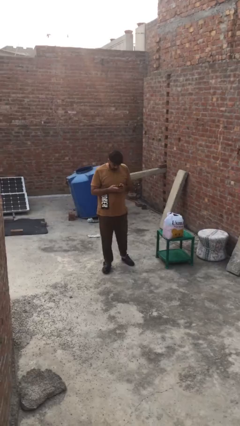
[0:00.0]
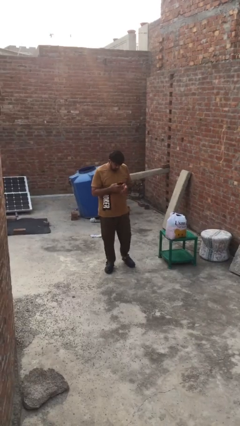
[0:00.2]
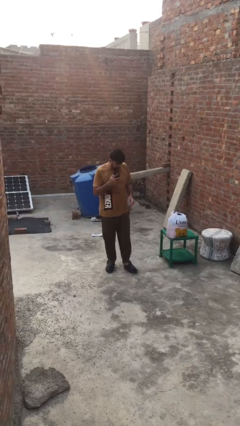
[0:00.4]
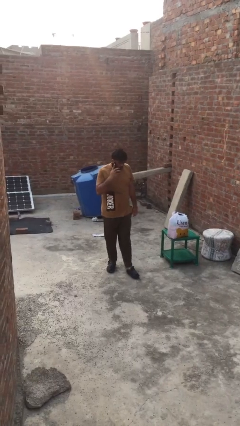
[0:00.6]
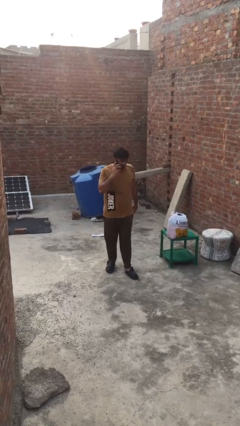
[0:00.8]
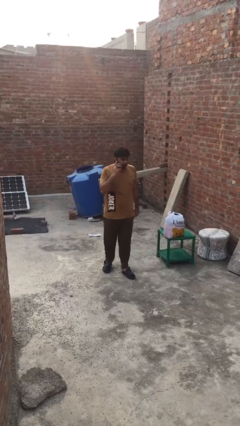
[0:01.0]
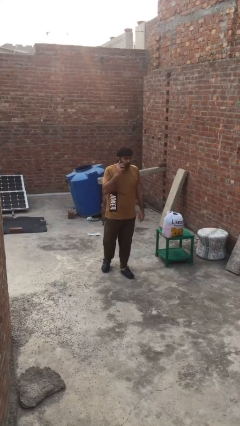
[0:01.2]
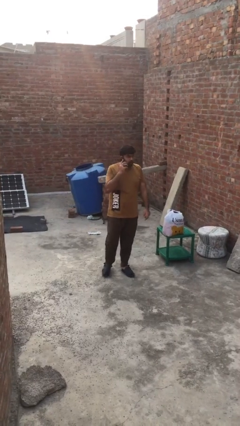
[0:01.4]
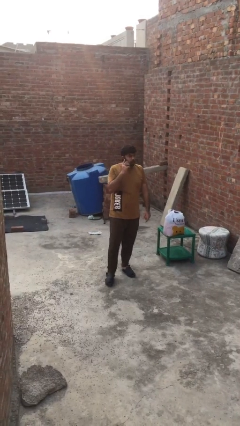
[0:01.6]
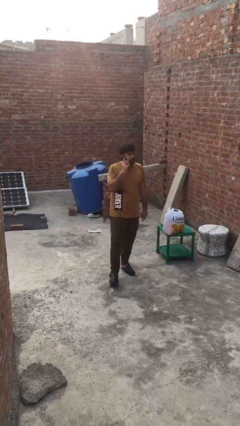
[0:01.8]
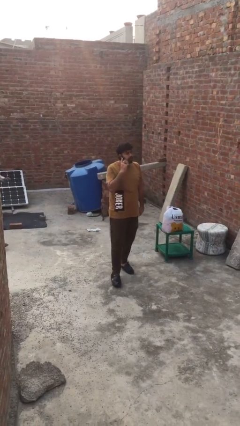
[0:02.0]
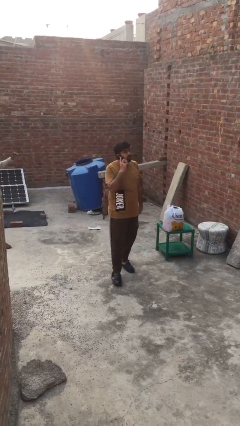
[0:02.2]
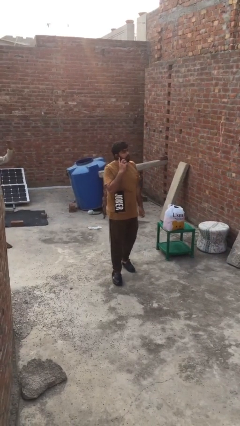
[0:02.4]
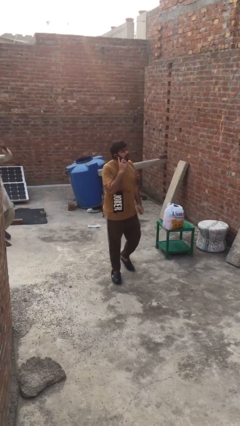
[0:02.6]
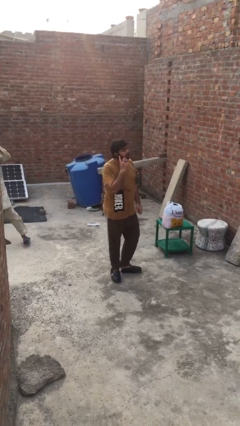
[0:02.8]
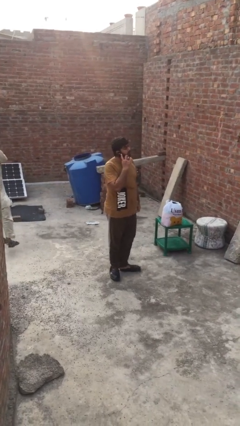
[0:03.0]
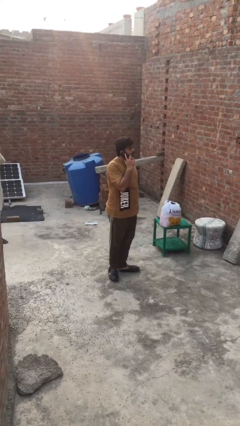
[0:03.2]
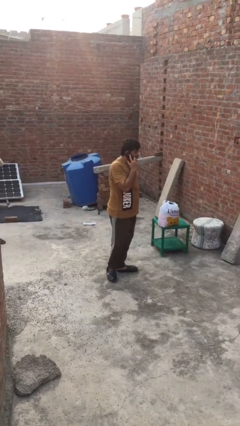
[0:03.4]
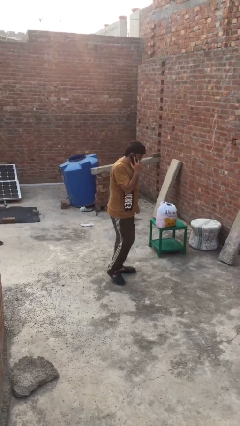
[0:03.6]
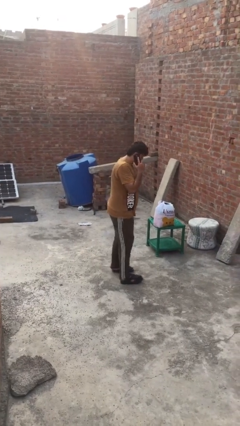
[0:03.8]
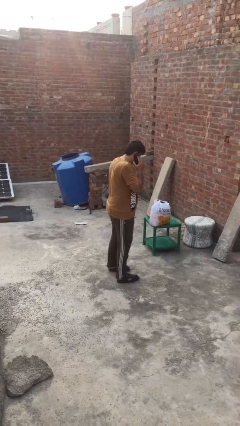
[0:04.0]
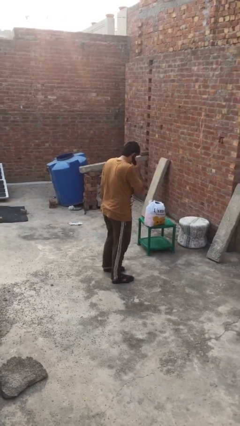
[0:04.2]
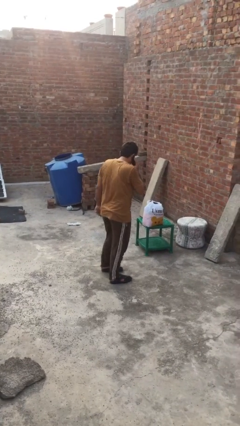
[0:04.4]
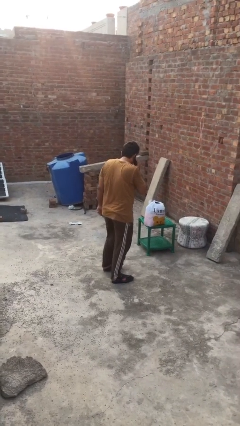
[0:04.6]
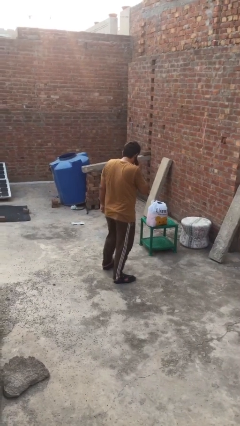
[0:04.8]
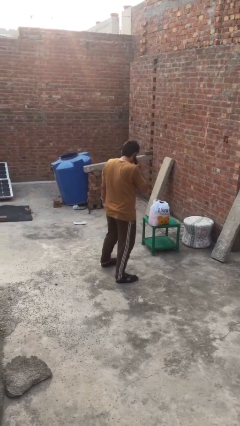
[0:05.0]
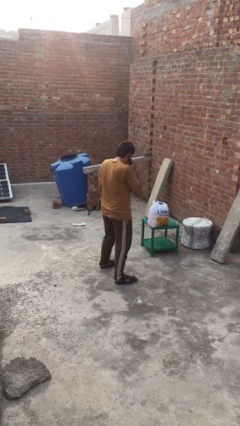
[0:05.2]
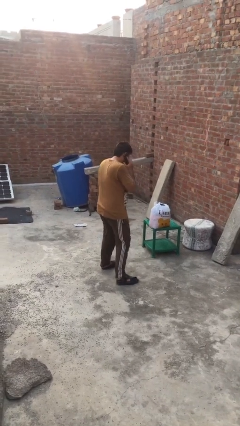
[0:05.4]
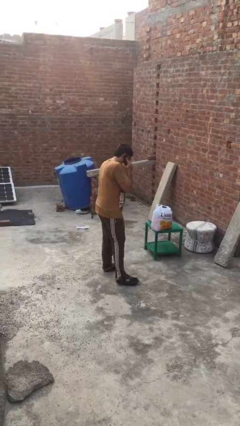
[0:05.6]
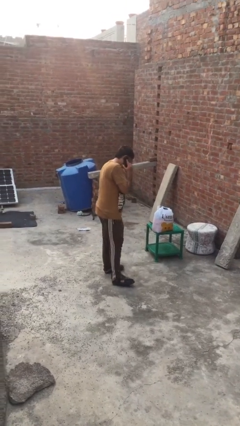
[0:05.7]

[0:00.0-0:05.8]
person talks on phone

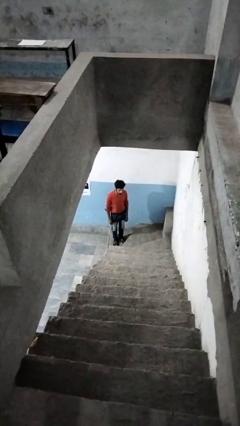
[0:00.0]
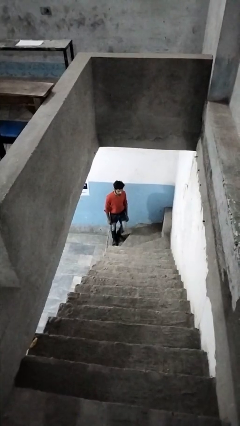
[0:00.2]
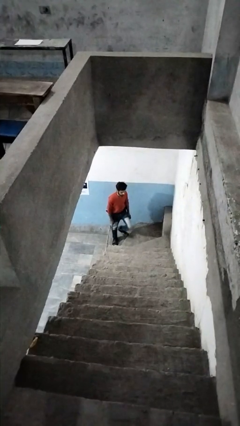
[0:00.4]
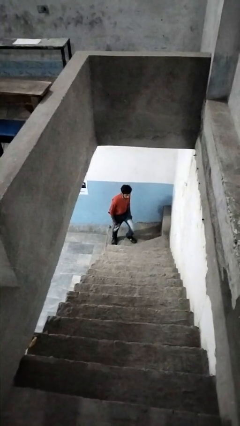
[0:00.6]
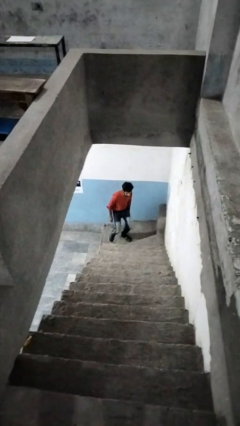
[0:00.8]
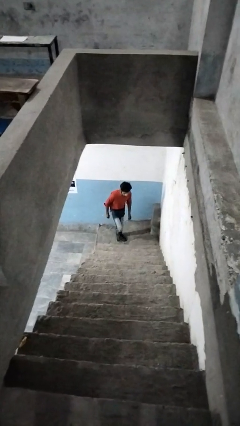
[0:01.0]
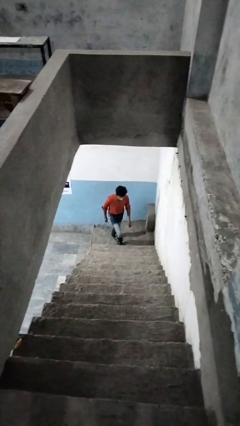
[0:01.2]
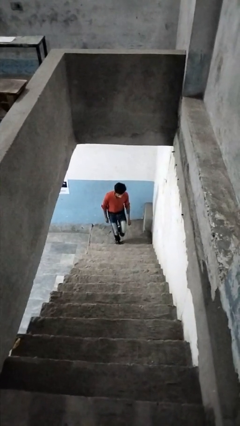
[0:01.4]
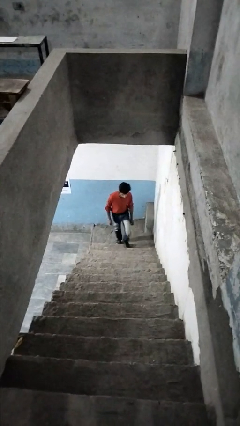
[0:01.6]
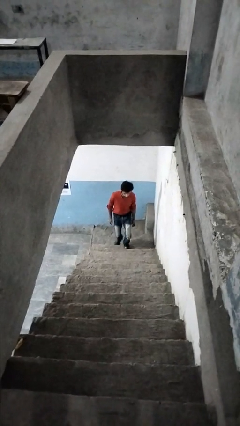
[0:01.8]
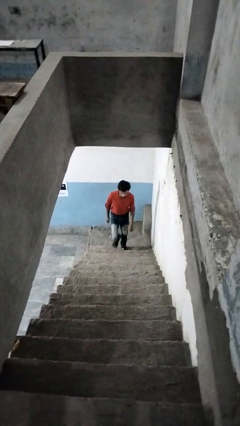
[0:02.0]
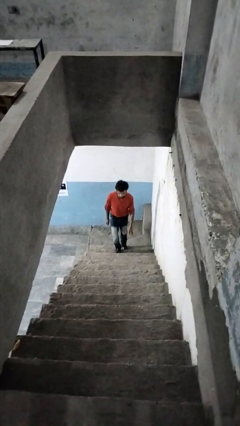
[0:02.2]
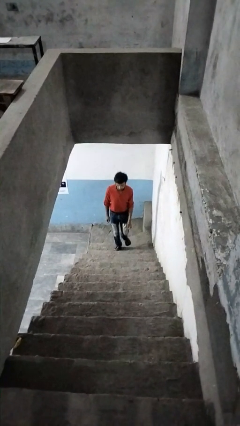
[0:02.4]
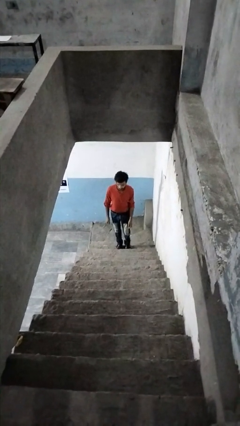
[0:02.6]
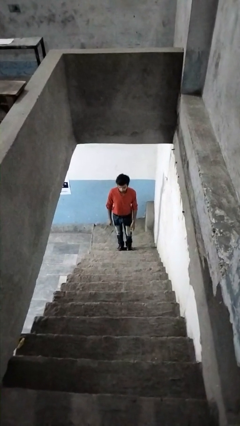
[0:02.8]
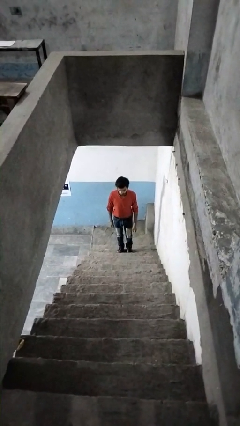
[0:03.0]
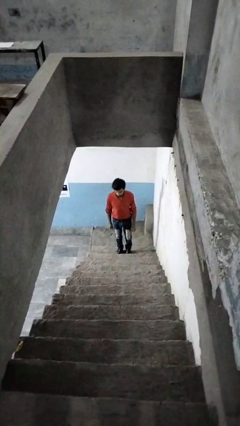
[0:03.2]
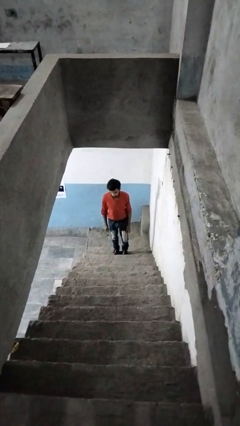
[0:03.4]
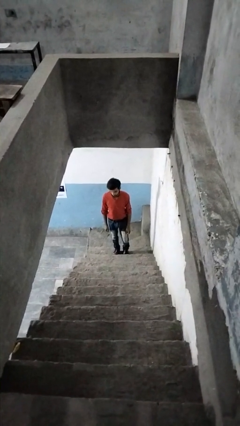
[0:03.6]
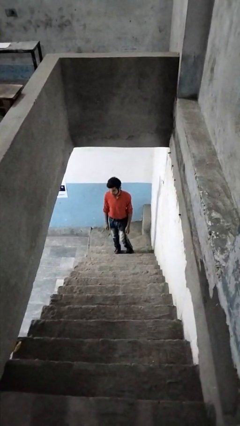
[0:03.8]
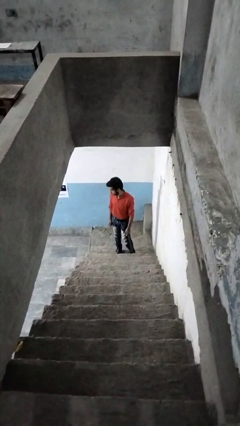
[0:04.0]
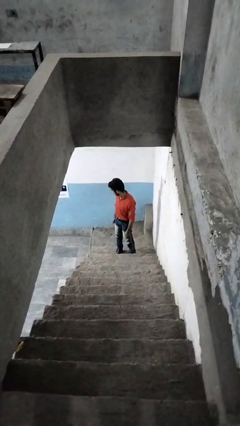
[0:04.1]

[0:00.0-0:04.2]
person climbs up stairs

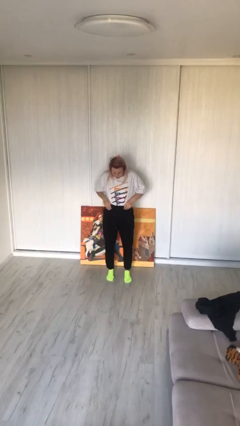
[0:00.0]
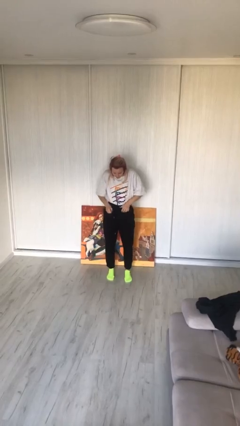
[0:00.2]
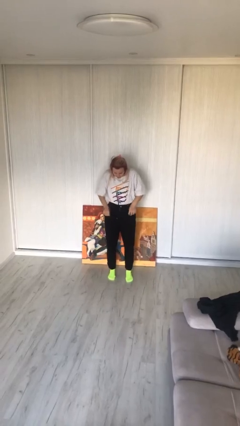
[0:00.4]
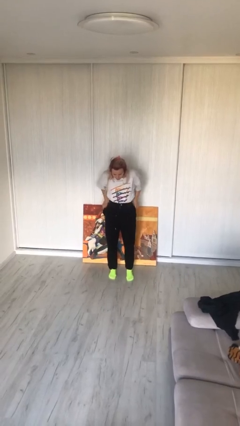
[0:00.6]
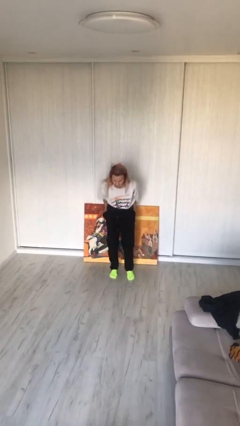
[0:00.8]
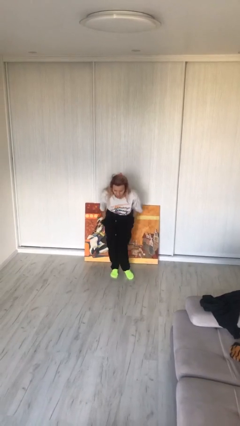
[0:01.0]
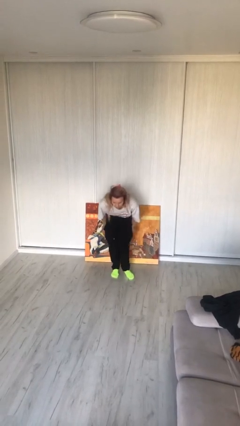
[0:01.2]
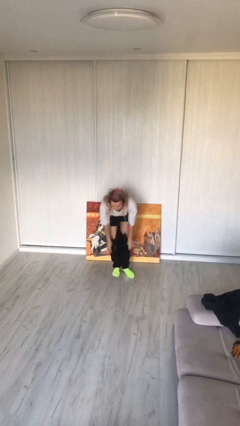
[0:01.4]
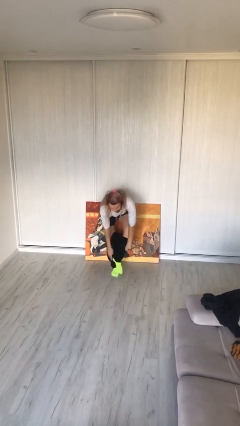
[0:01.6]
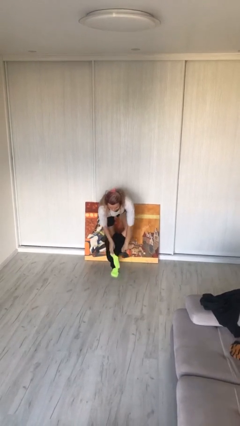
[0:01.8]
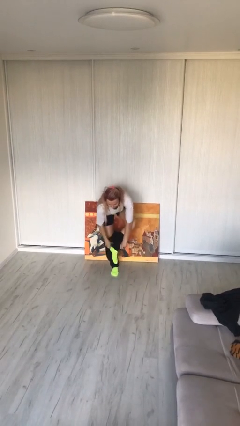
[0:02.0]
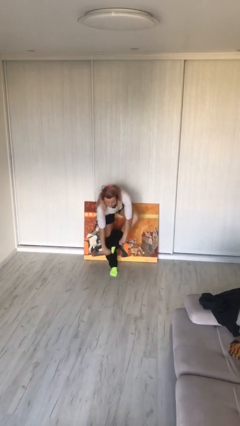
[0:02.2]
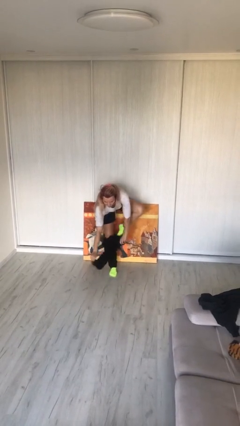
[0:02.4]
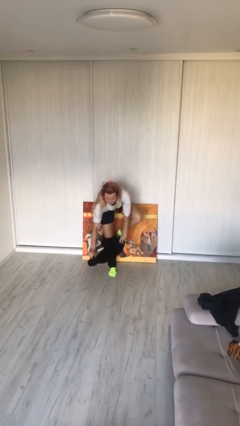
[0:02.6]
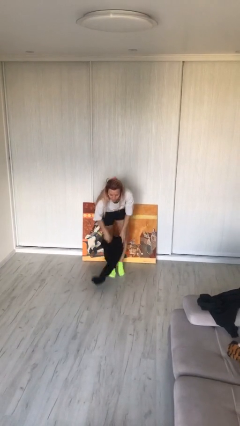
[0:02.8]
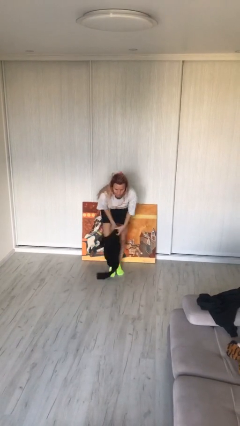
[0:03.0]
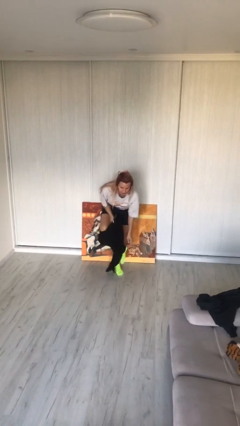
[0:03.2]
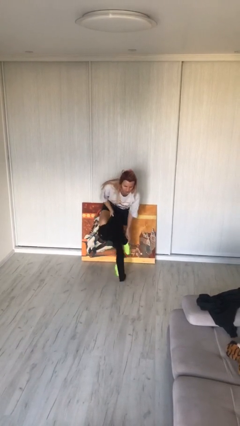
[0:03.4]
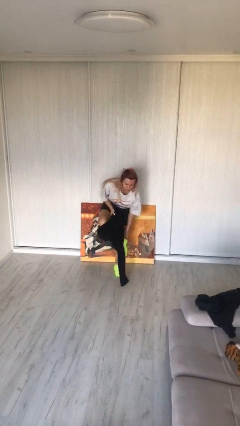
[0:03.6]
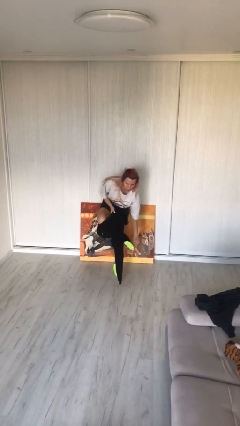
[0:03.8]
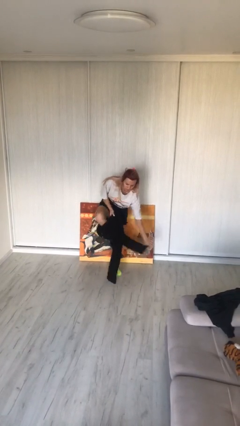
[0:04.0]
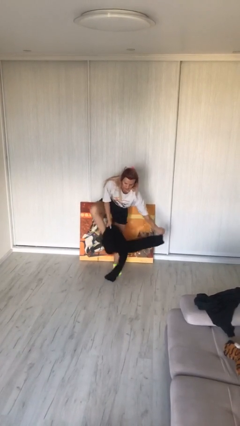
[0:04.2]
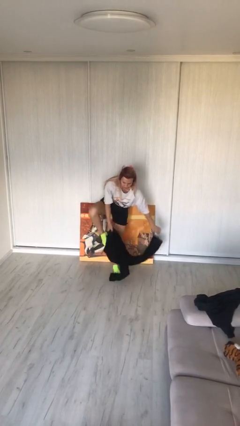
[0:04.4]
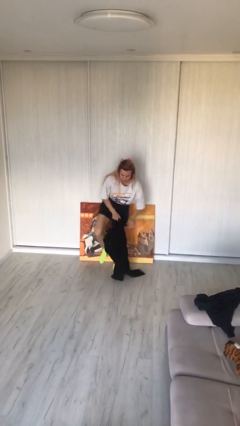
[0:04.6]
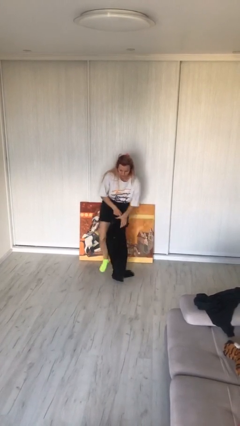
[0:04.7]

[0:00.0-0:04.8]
person takes off pants

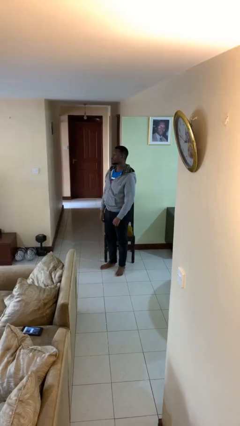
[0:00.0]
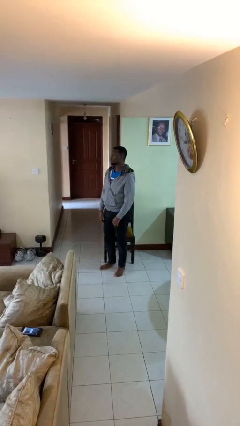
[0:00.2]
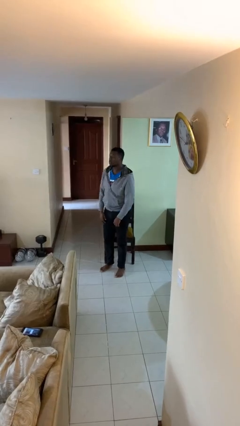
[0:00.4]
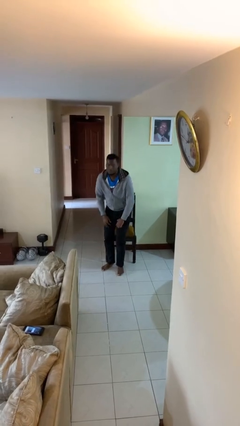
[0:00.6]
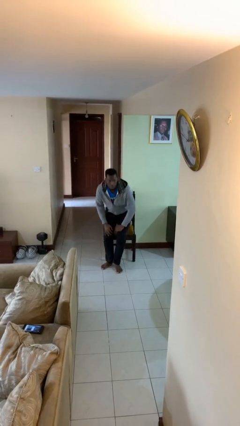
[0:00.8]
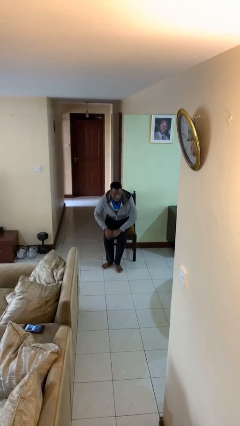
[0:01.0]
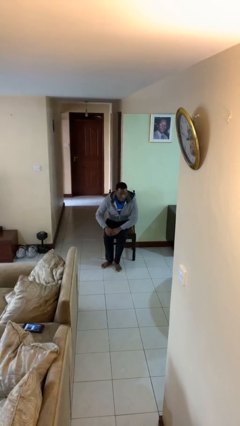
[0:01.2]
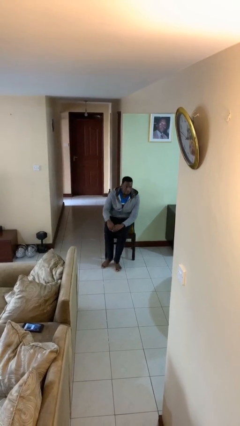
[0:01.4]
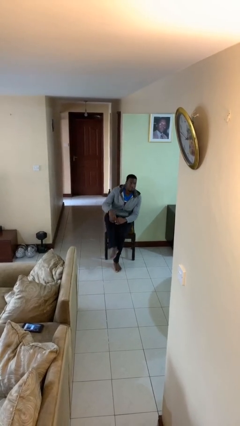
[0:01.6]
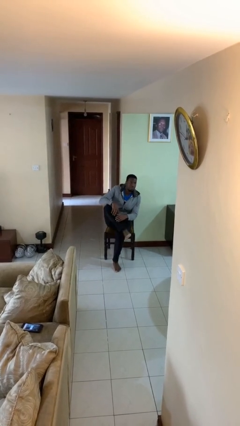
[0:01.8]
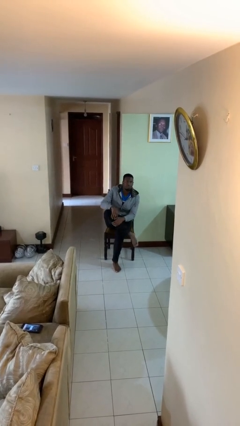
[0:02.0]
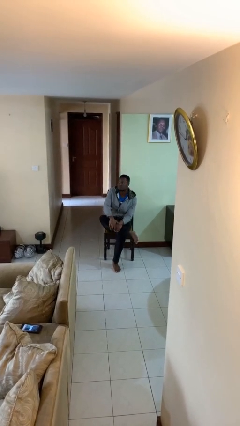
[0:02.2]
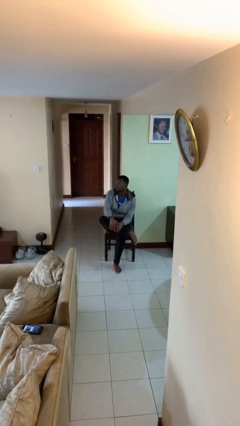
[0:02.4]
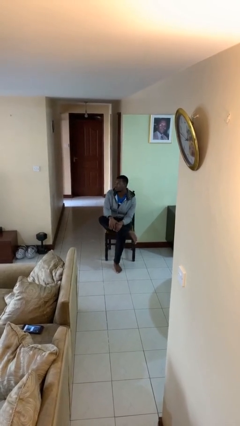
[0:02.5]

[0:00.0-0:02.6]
person sits down

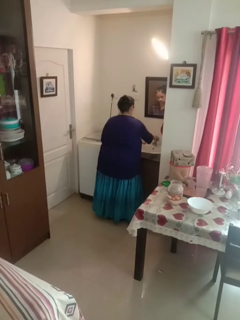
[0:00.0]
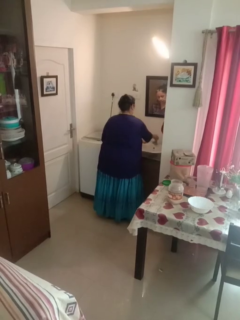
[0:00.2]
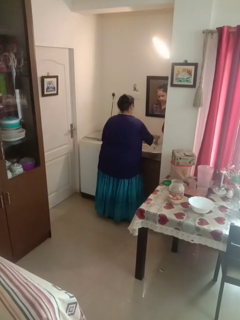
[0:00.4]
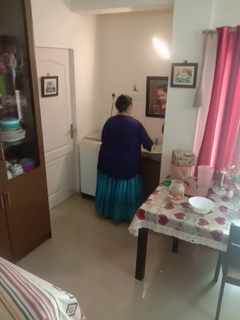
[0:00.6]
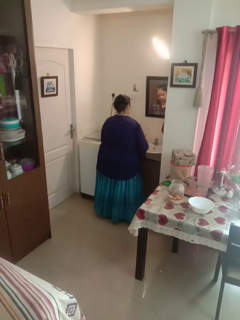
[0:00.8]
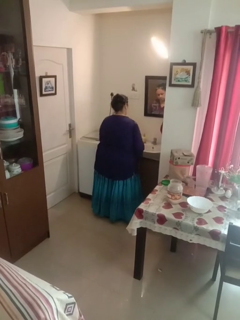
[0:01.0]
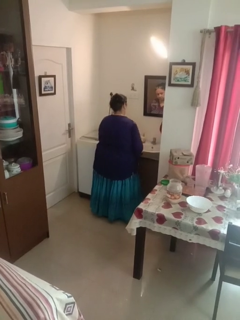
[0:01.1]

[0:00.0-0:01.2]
person turns off faucet
